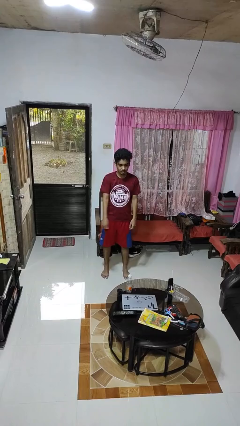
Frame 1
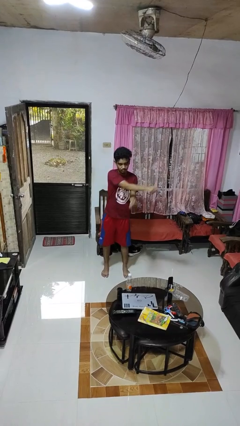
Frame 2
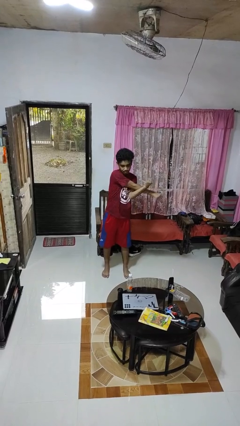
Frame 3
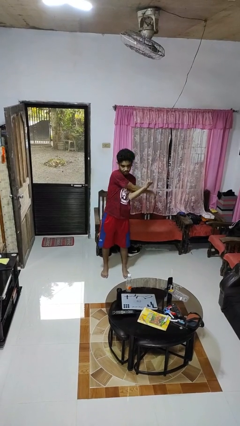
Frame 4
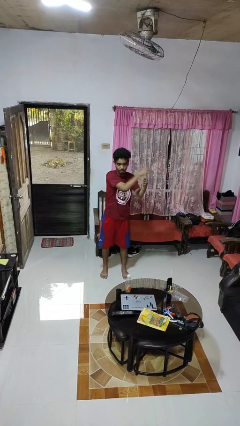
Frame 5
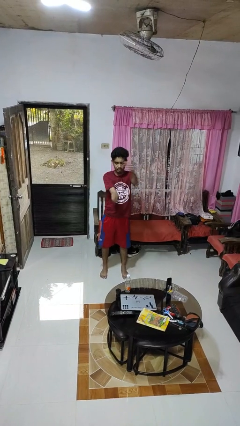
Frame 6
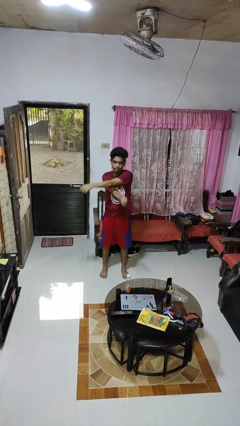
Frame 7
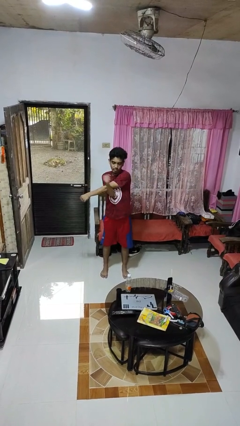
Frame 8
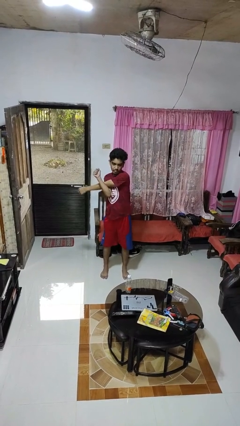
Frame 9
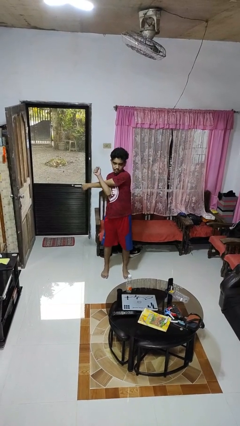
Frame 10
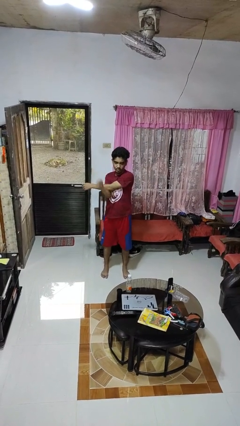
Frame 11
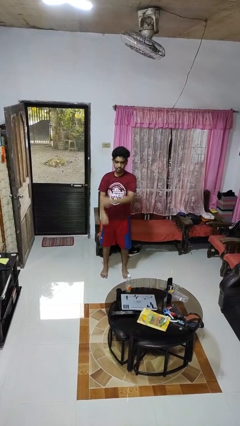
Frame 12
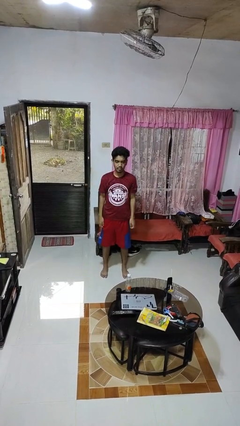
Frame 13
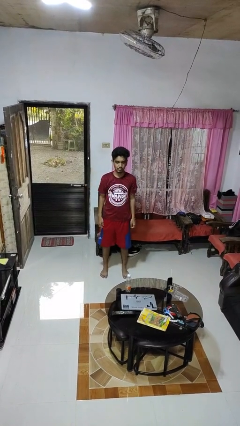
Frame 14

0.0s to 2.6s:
person stretches arms to side

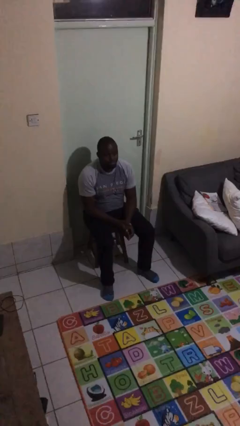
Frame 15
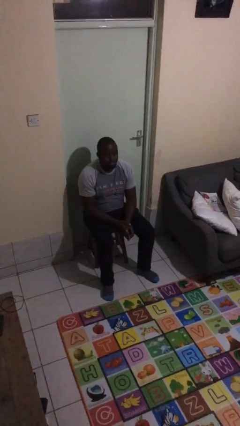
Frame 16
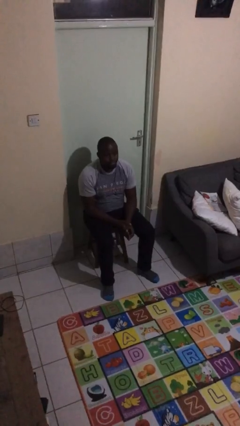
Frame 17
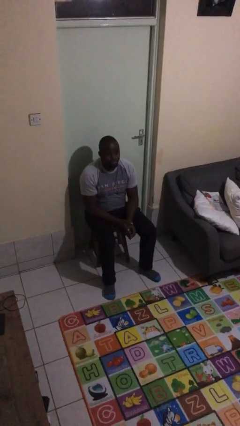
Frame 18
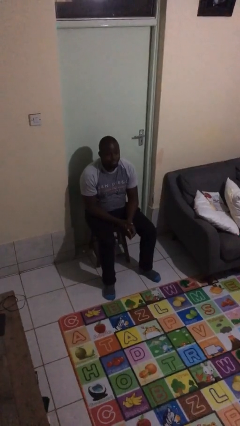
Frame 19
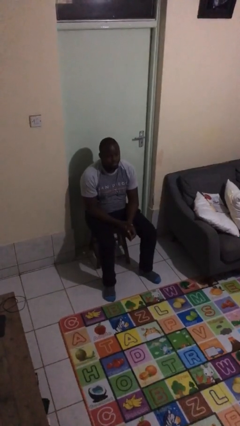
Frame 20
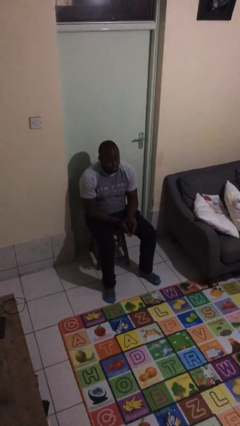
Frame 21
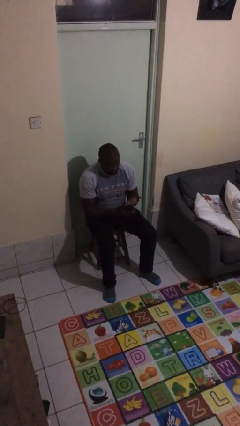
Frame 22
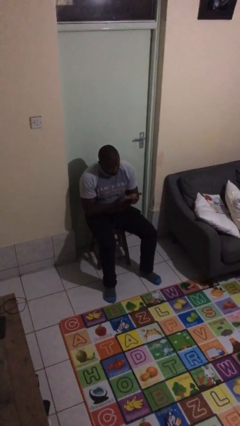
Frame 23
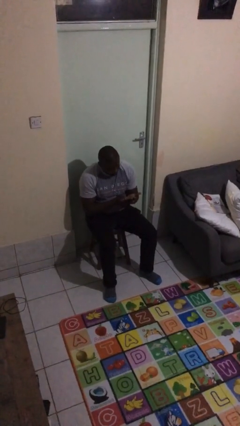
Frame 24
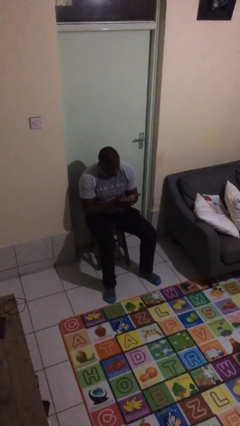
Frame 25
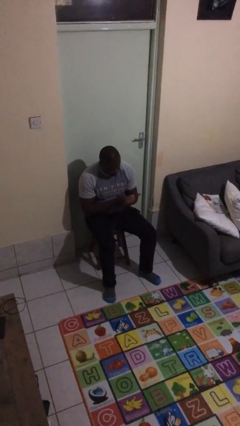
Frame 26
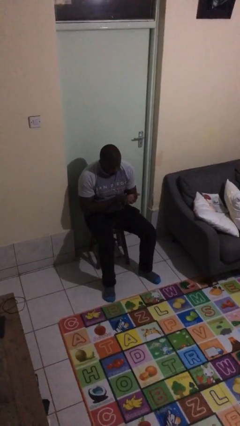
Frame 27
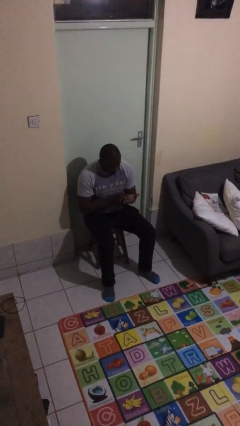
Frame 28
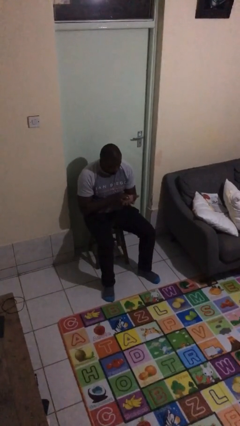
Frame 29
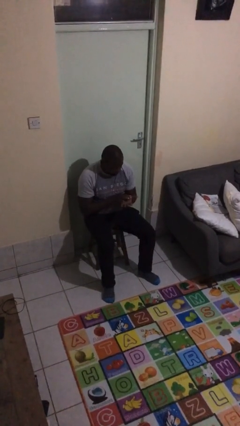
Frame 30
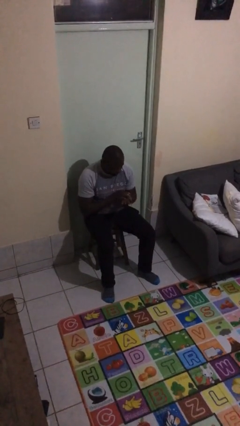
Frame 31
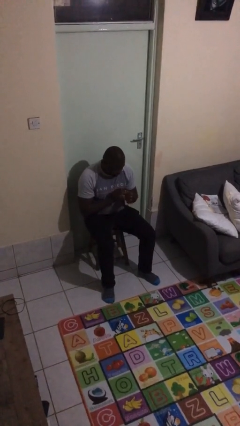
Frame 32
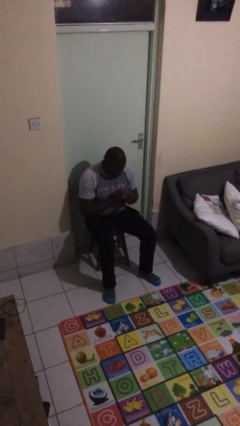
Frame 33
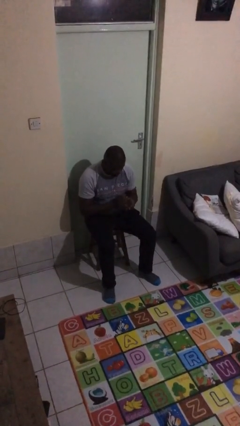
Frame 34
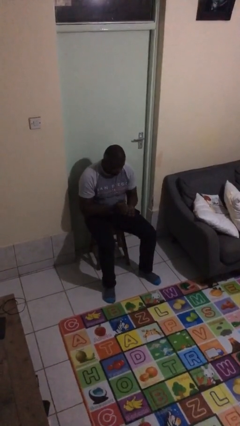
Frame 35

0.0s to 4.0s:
person looks at hands in lap

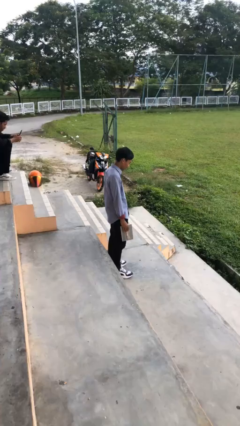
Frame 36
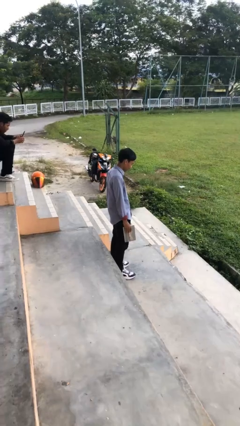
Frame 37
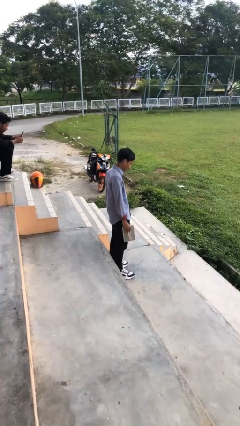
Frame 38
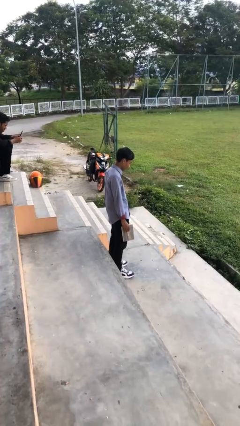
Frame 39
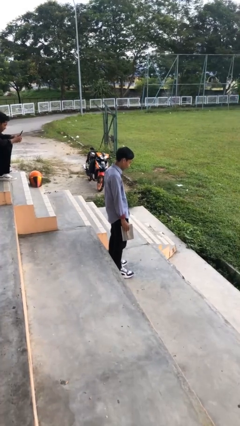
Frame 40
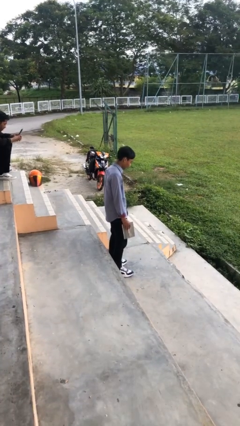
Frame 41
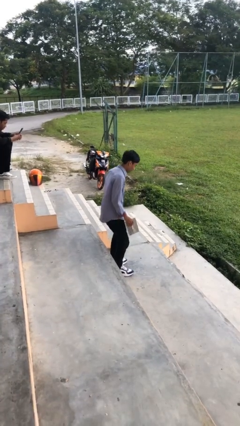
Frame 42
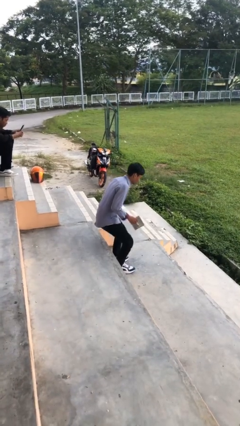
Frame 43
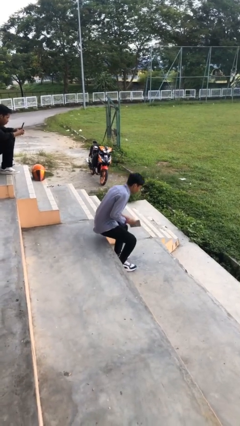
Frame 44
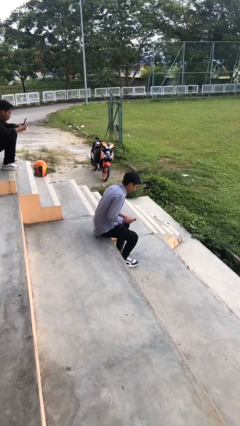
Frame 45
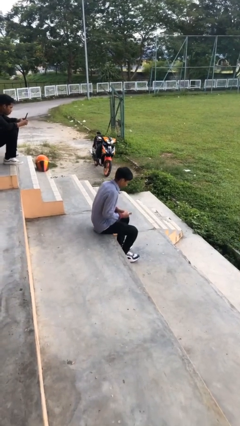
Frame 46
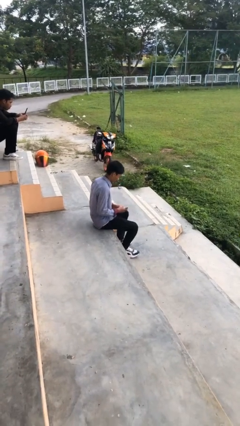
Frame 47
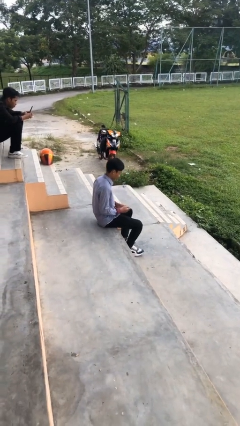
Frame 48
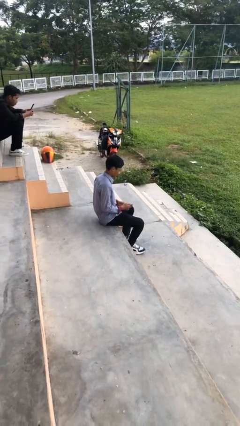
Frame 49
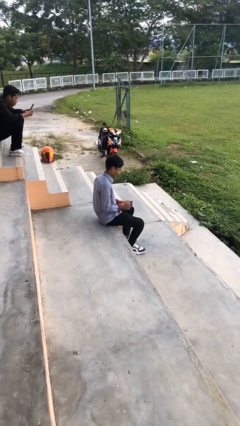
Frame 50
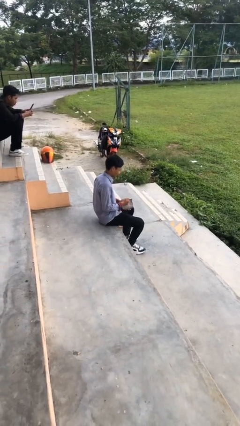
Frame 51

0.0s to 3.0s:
person sits down

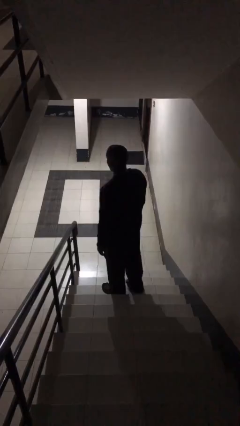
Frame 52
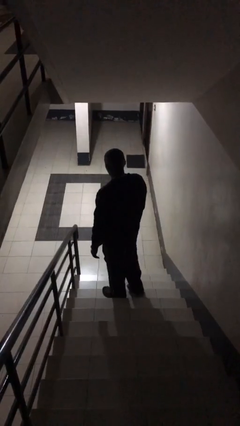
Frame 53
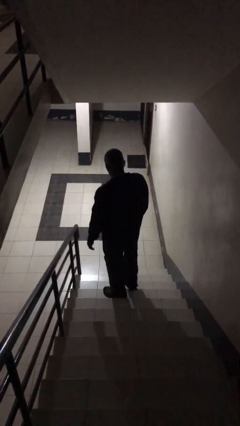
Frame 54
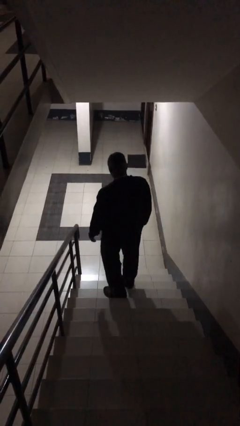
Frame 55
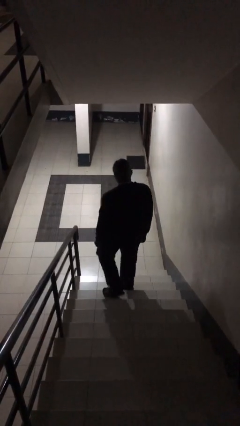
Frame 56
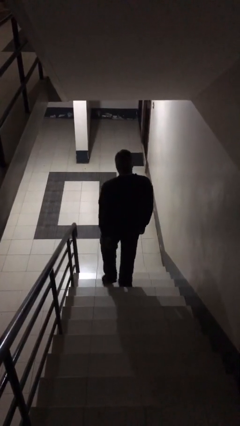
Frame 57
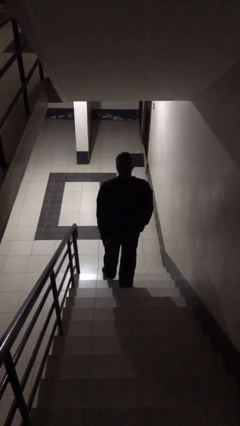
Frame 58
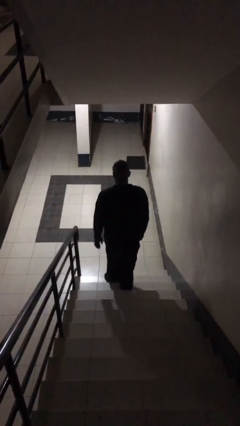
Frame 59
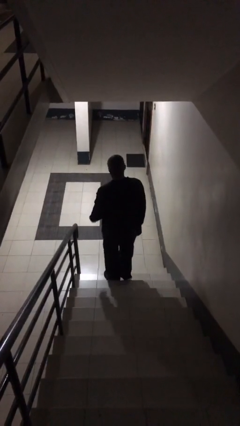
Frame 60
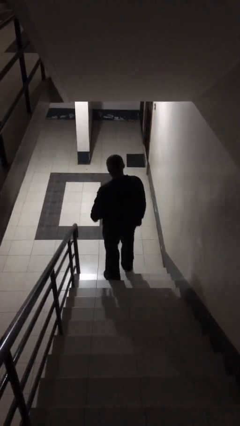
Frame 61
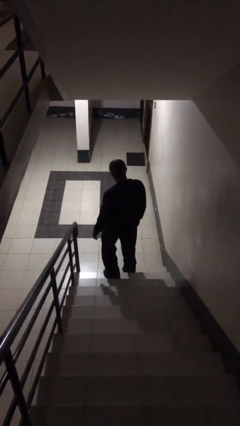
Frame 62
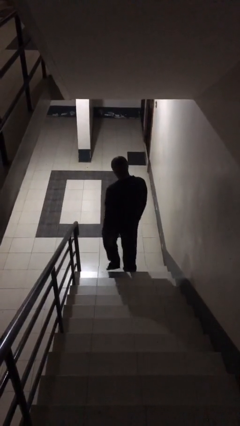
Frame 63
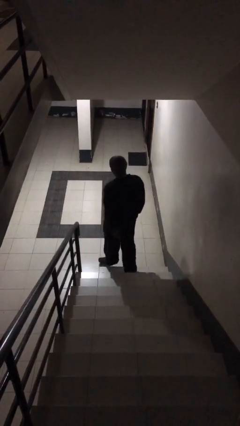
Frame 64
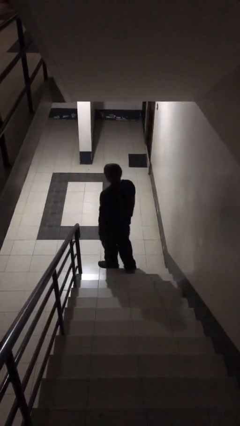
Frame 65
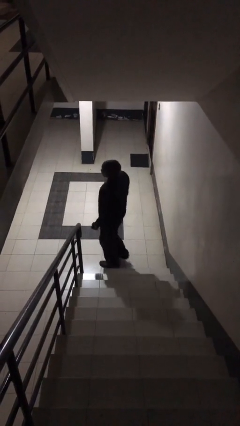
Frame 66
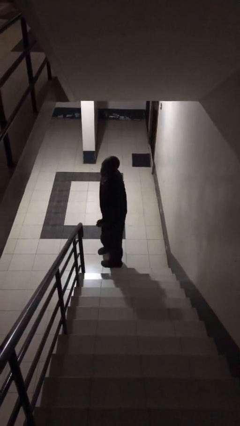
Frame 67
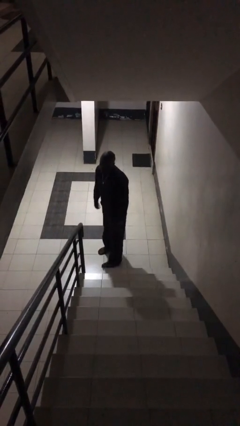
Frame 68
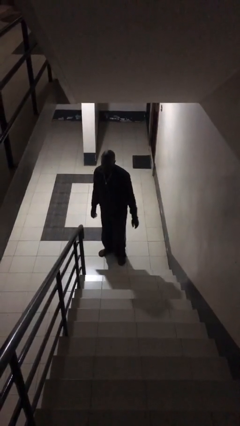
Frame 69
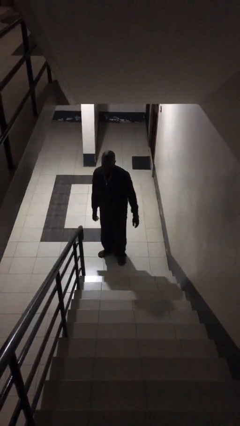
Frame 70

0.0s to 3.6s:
person climbs down stairs

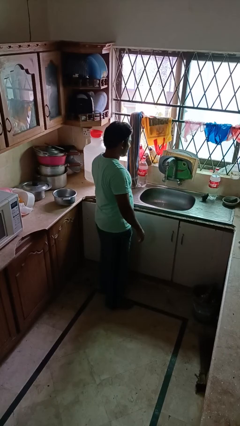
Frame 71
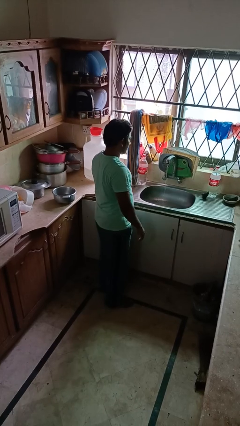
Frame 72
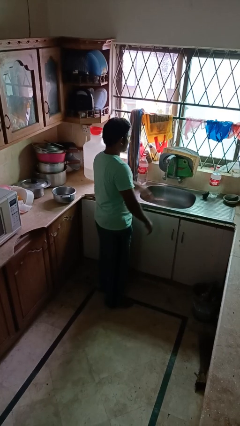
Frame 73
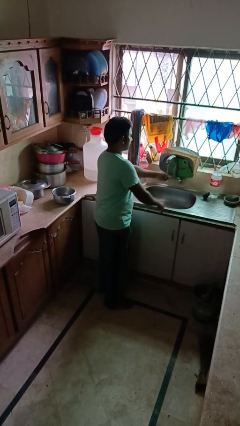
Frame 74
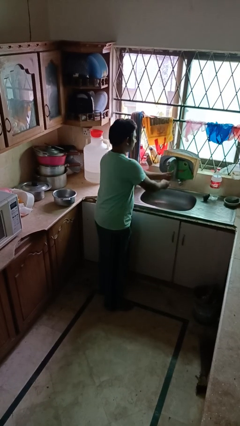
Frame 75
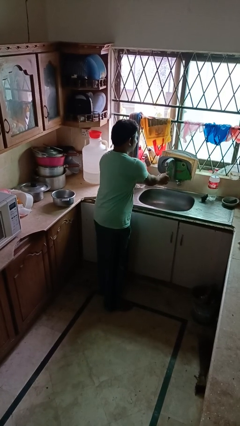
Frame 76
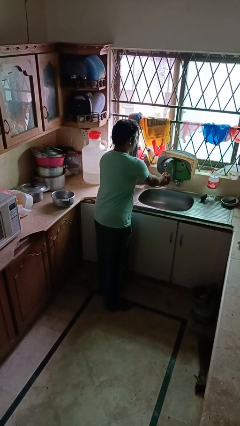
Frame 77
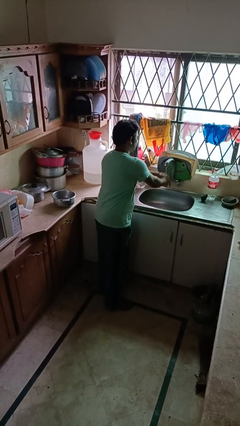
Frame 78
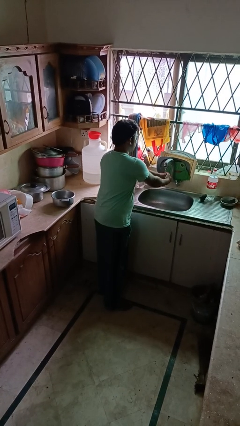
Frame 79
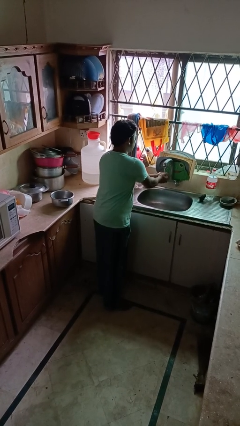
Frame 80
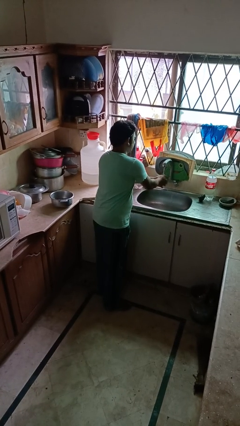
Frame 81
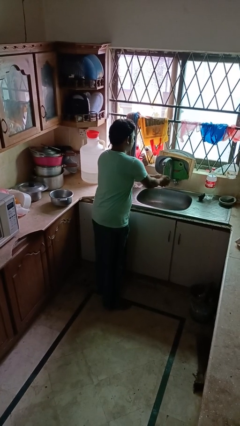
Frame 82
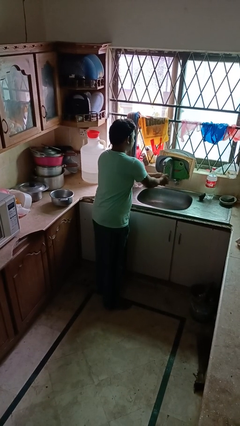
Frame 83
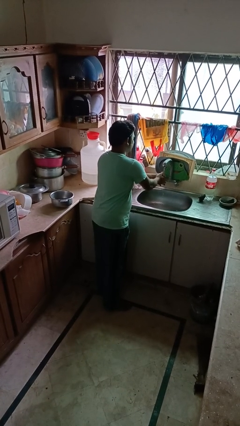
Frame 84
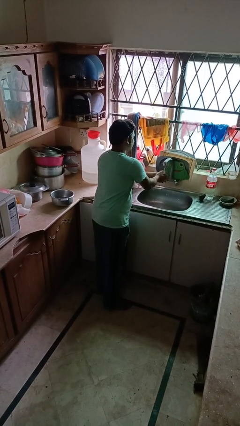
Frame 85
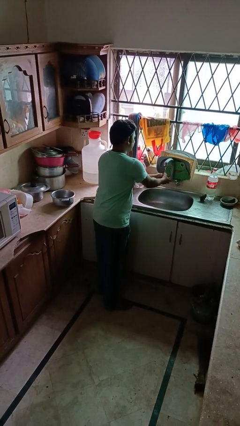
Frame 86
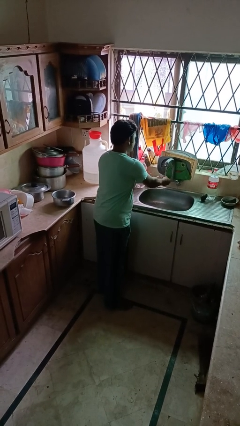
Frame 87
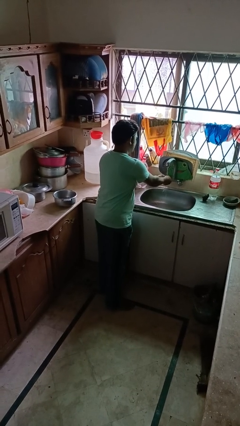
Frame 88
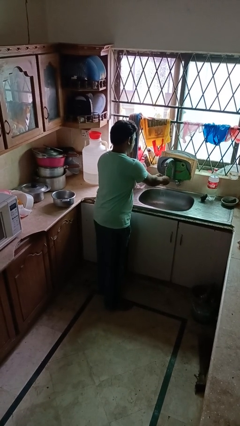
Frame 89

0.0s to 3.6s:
person washes hands

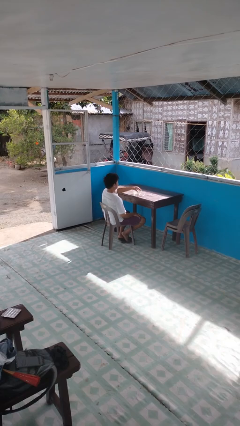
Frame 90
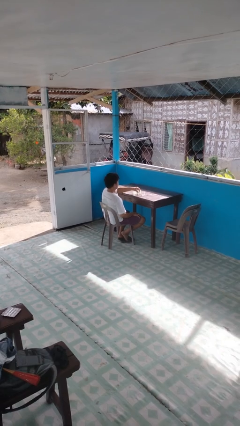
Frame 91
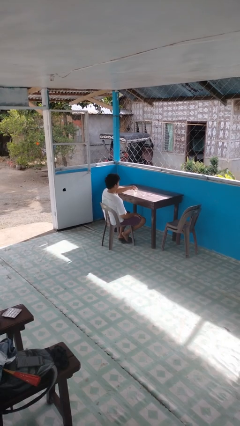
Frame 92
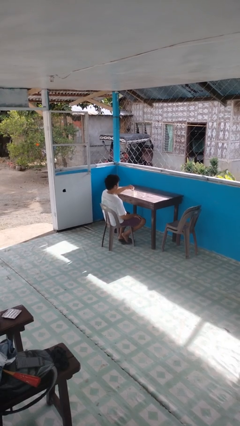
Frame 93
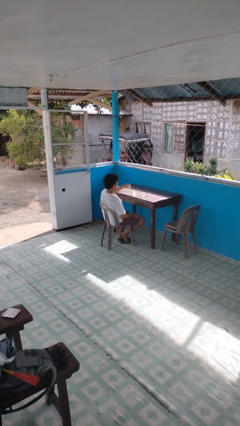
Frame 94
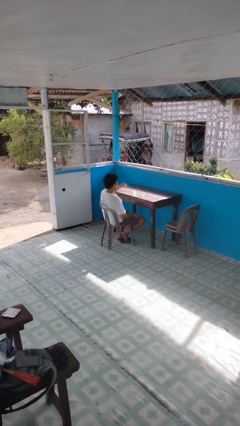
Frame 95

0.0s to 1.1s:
person picks up object from table
